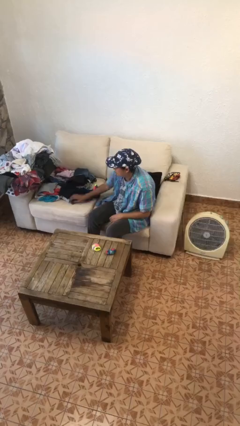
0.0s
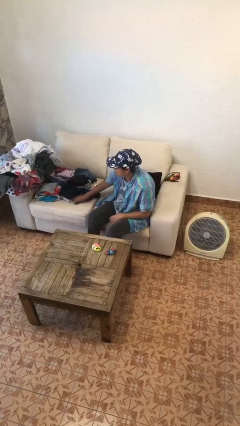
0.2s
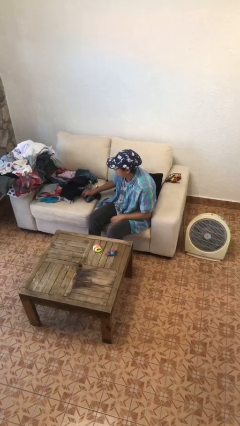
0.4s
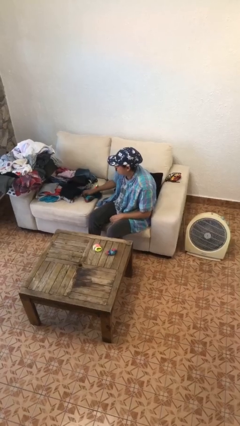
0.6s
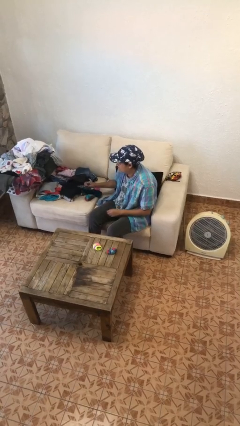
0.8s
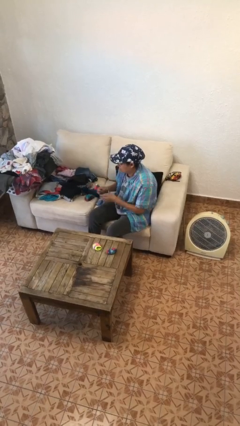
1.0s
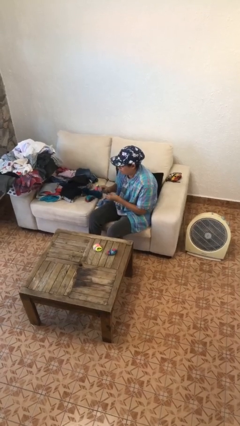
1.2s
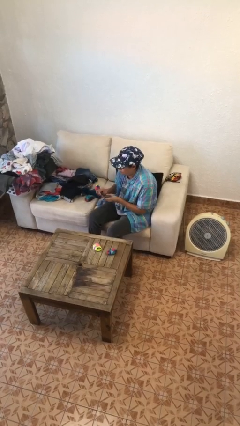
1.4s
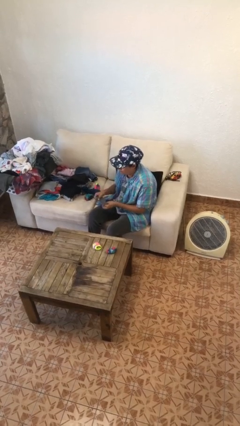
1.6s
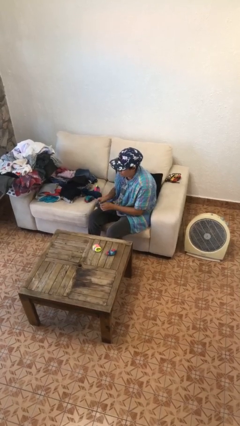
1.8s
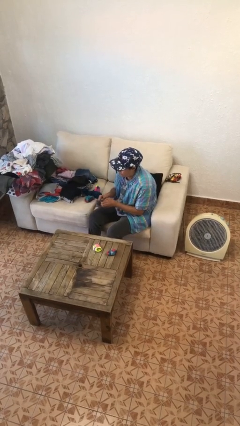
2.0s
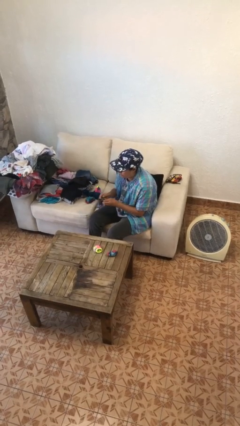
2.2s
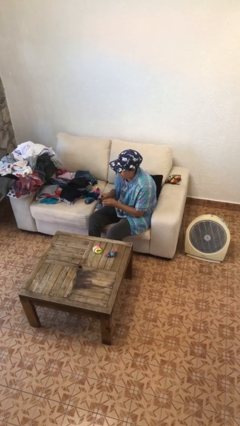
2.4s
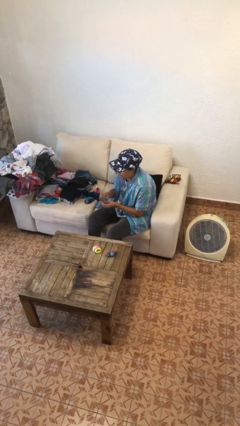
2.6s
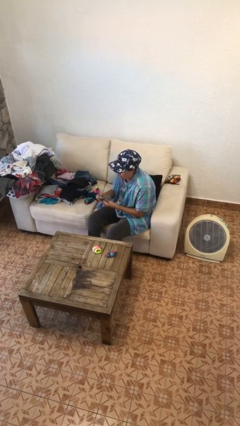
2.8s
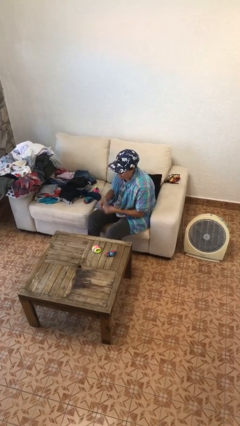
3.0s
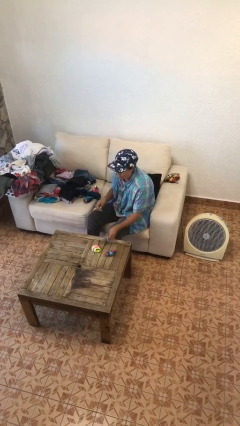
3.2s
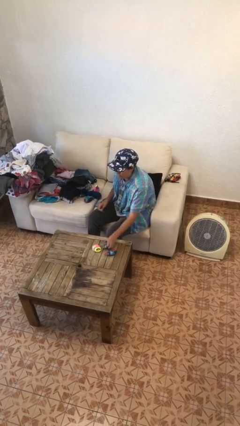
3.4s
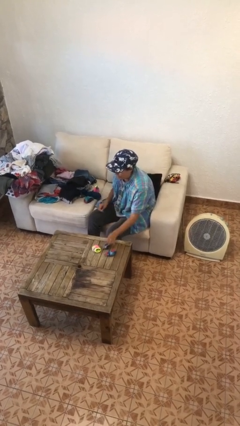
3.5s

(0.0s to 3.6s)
person folds socks

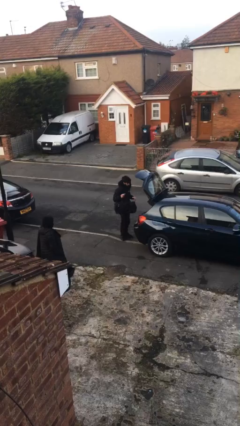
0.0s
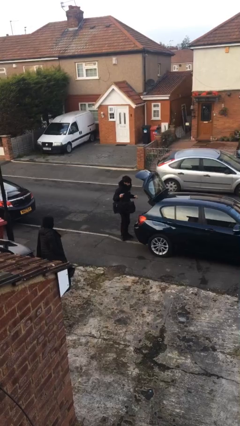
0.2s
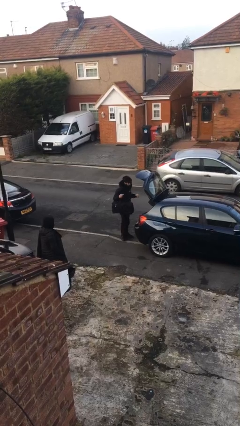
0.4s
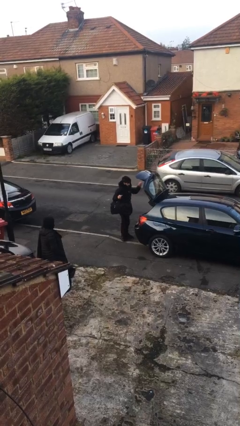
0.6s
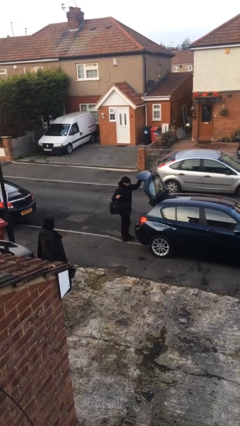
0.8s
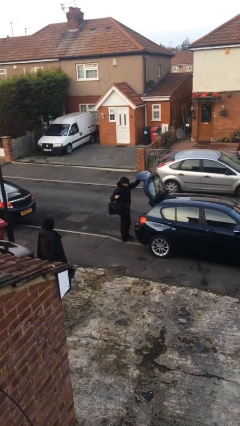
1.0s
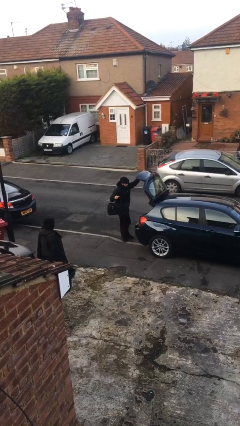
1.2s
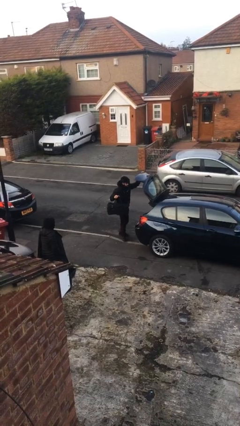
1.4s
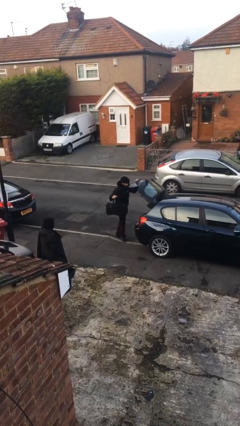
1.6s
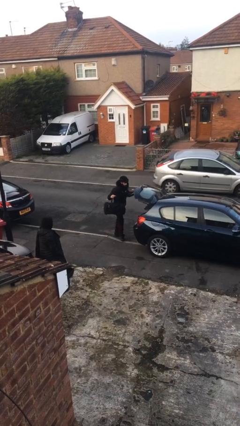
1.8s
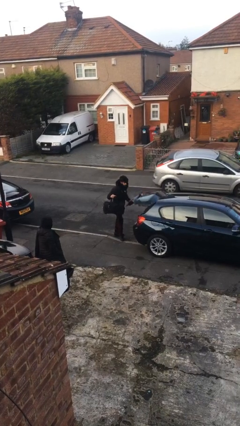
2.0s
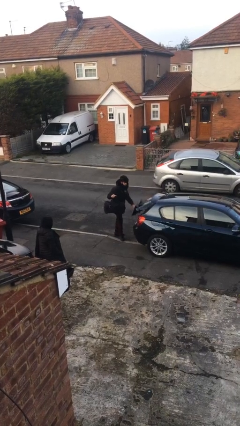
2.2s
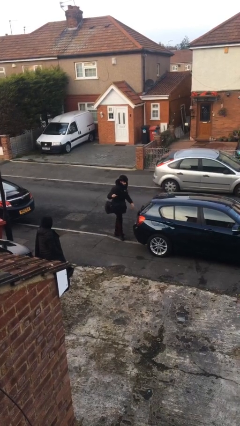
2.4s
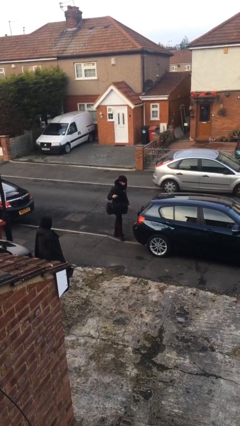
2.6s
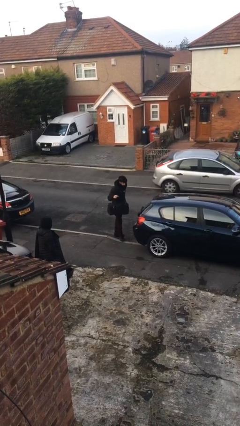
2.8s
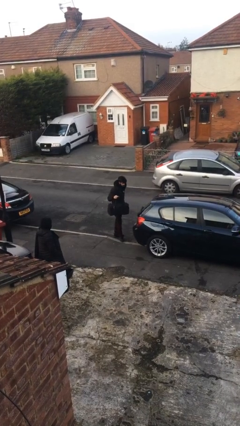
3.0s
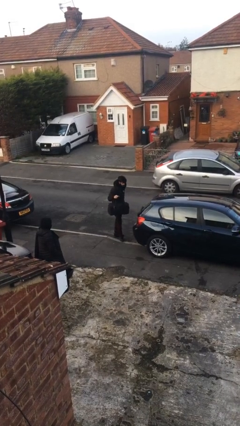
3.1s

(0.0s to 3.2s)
person closes car trunk

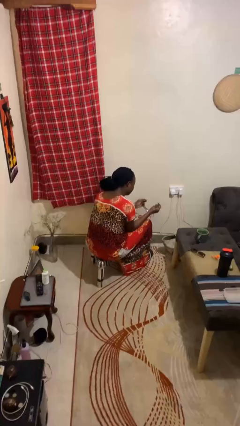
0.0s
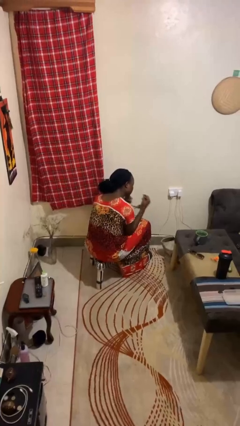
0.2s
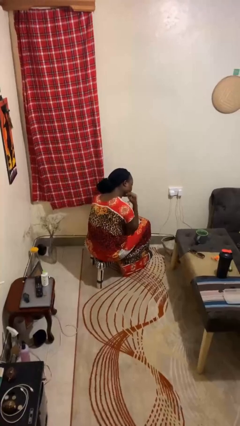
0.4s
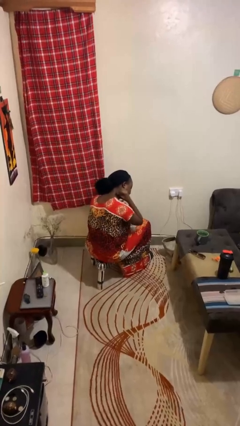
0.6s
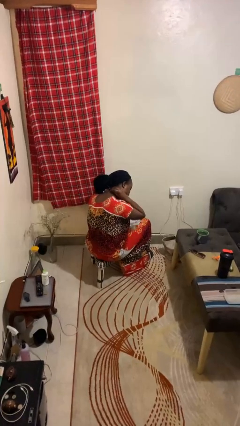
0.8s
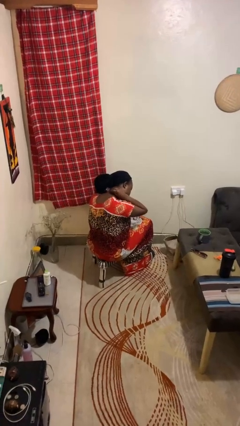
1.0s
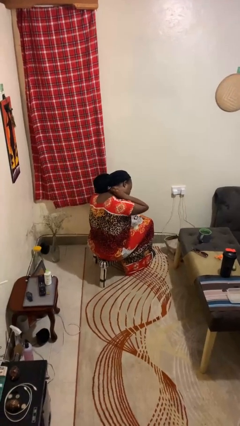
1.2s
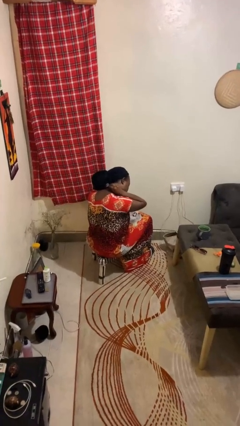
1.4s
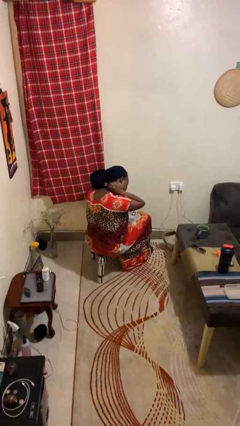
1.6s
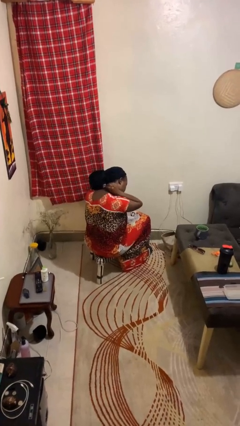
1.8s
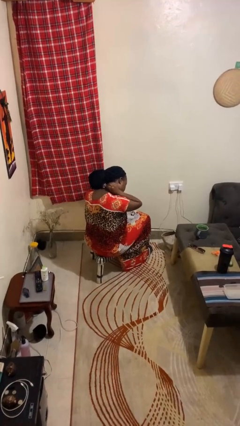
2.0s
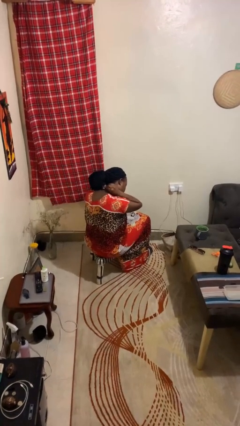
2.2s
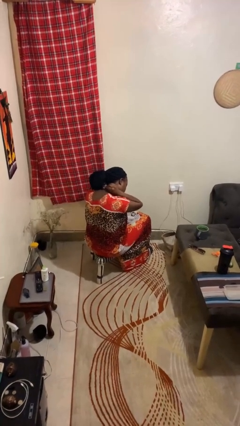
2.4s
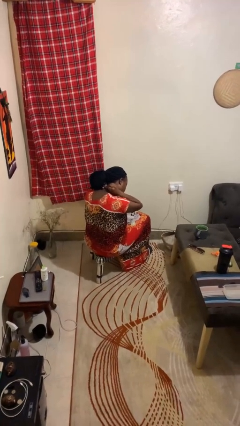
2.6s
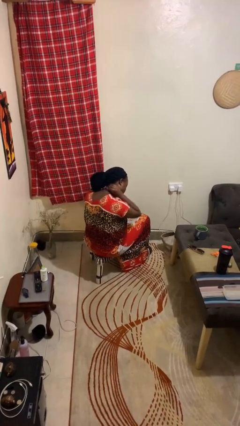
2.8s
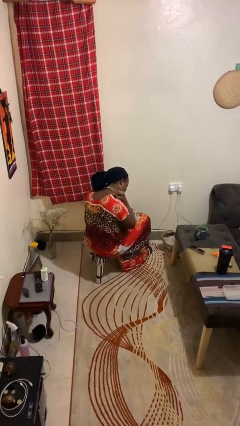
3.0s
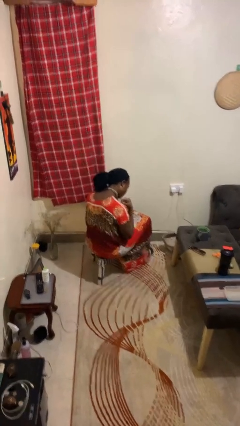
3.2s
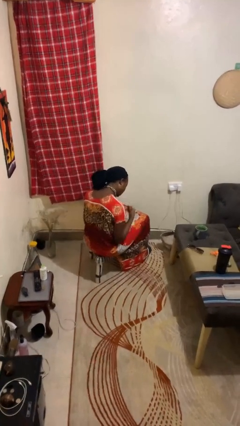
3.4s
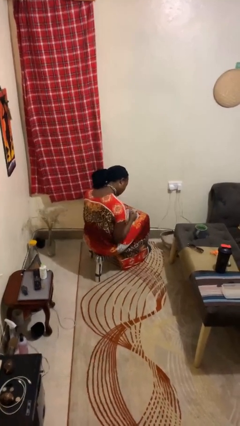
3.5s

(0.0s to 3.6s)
person puts on necklace

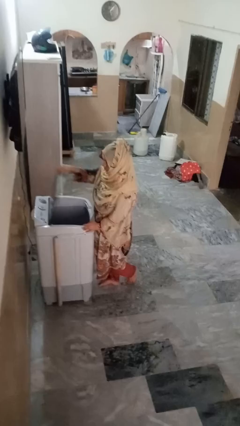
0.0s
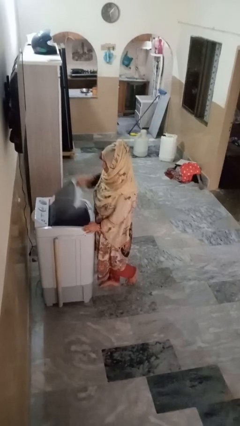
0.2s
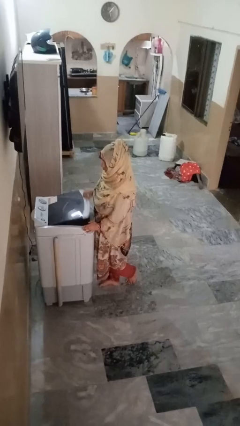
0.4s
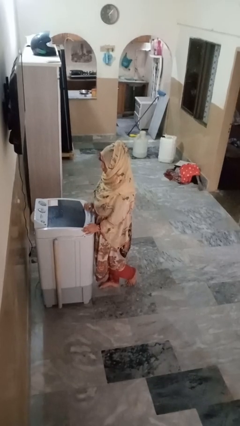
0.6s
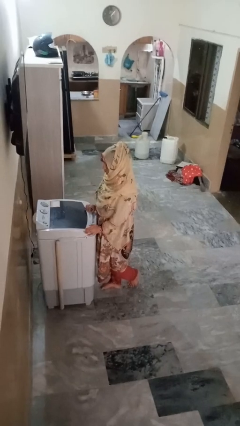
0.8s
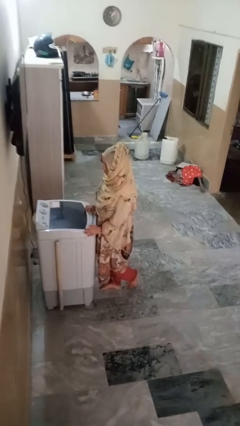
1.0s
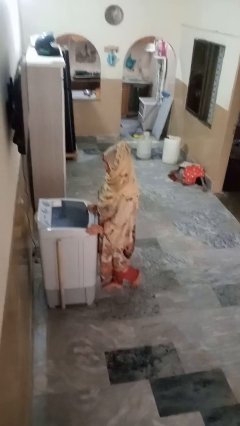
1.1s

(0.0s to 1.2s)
person closes clothes washer

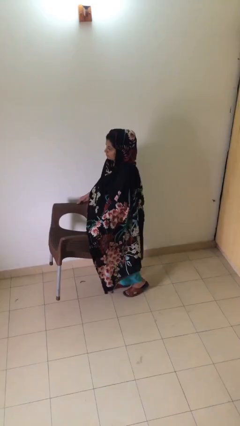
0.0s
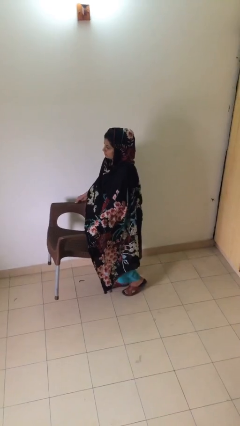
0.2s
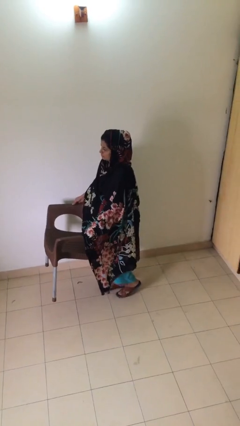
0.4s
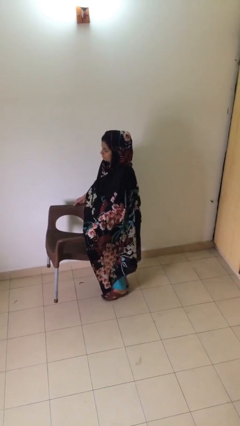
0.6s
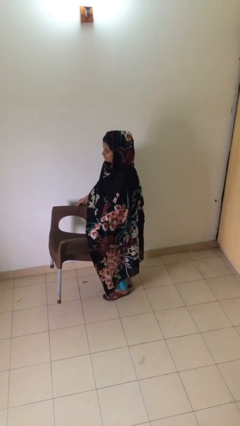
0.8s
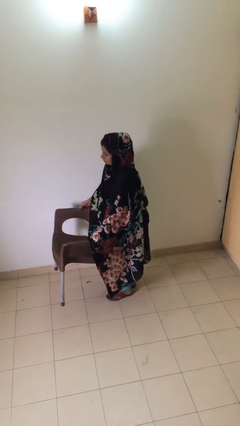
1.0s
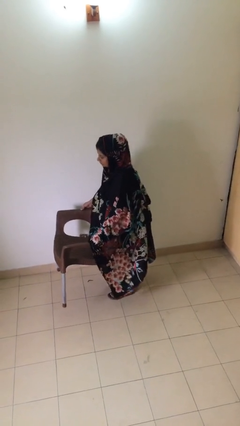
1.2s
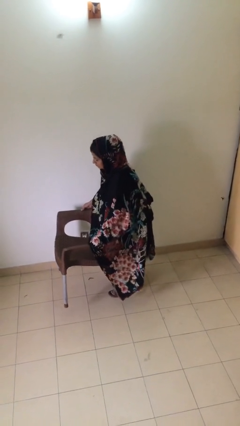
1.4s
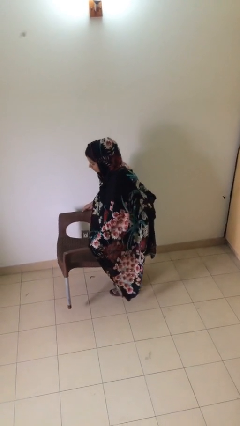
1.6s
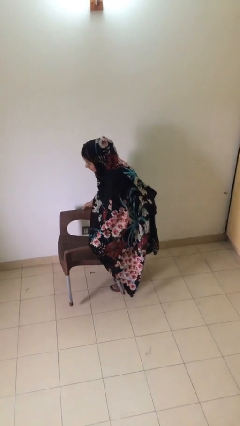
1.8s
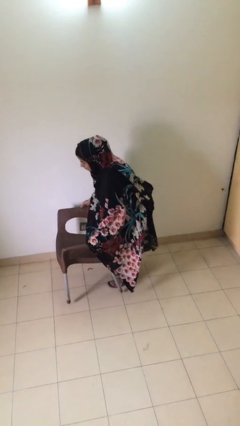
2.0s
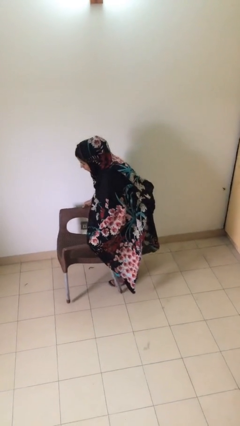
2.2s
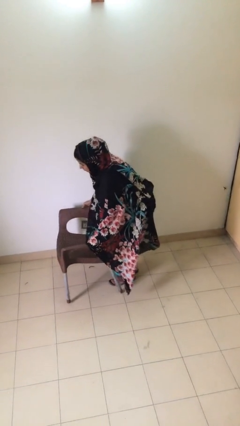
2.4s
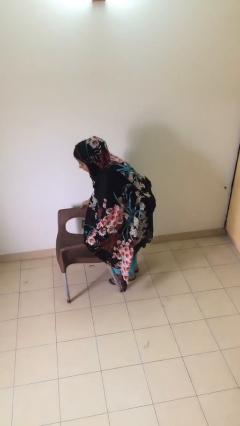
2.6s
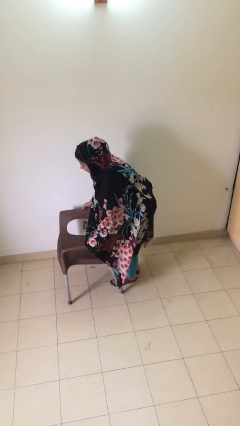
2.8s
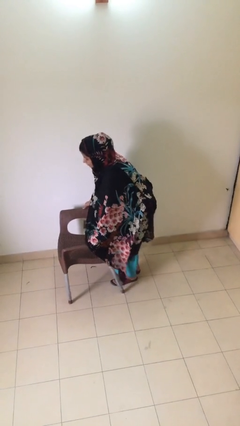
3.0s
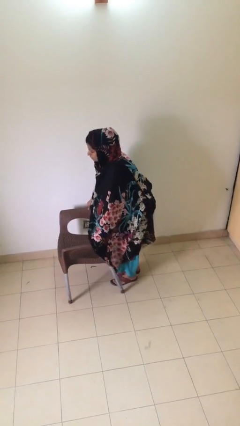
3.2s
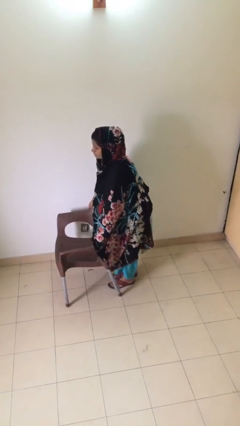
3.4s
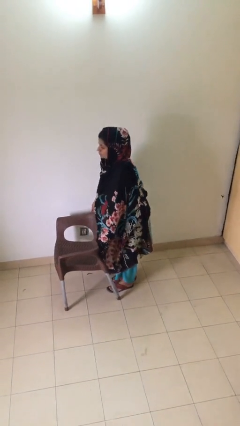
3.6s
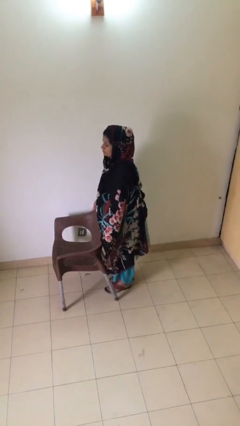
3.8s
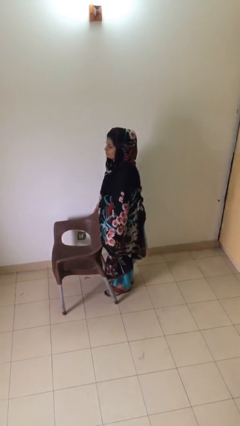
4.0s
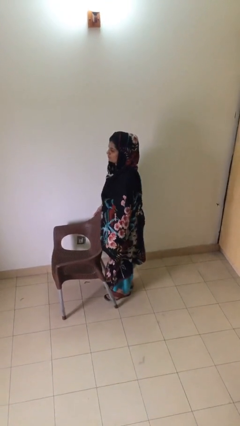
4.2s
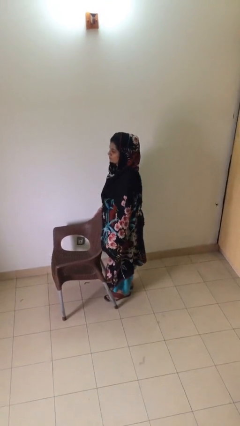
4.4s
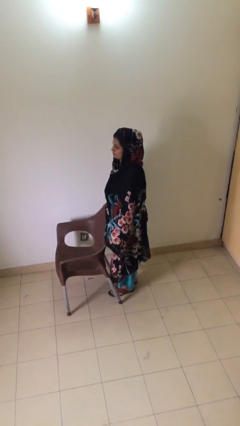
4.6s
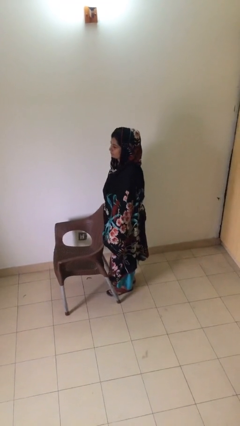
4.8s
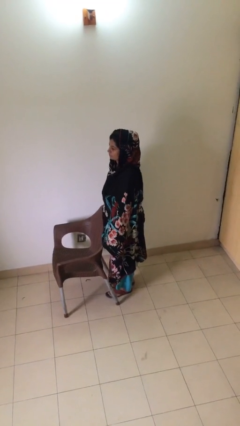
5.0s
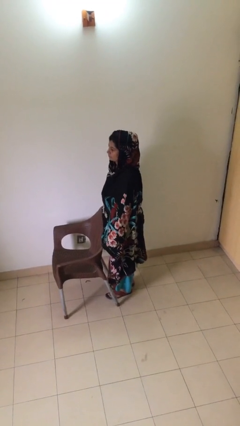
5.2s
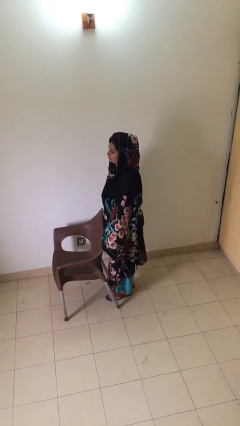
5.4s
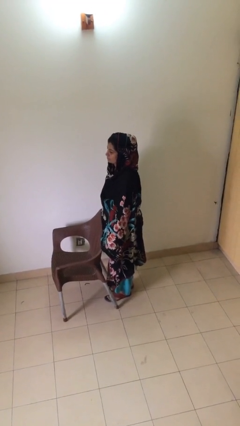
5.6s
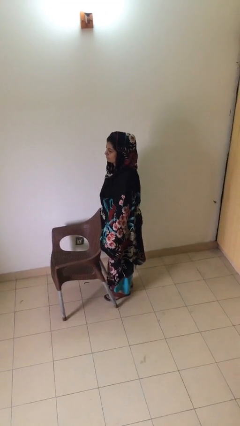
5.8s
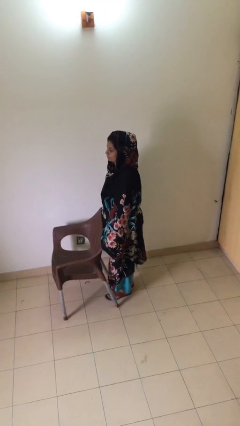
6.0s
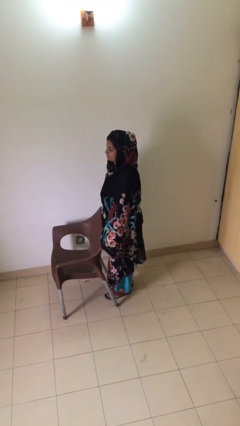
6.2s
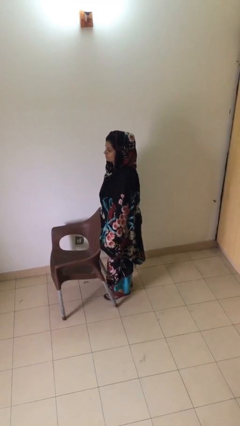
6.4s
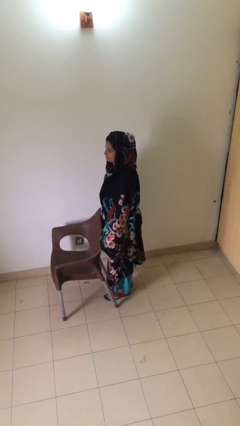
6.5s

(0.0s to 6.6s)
person puts down object on floor
